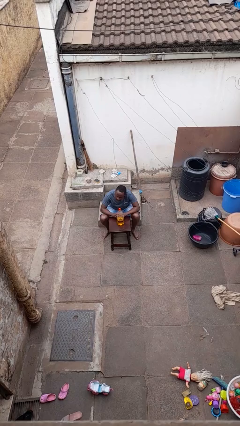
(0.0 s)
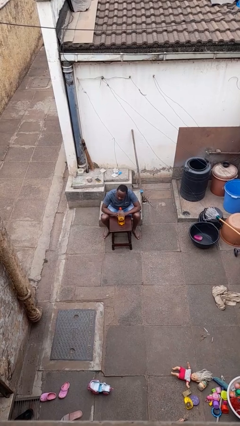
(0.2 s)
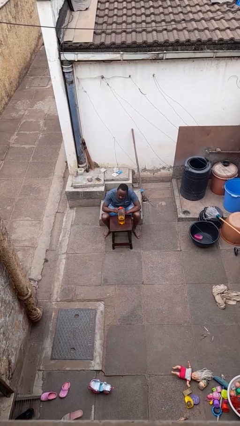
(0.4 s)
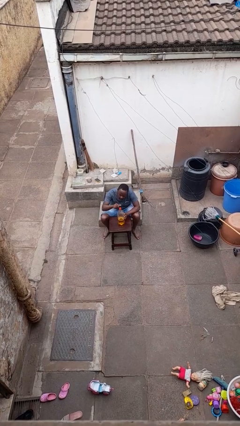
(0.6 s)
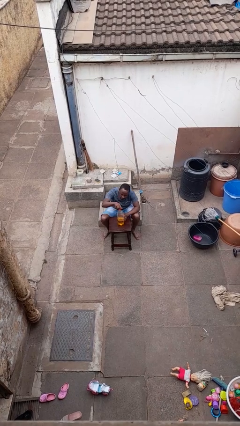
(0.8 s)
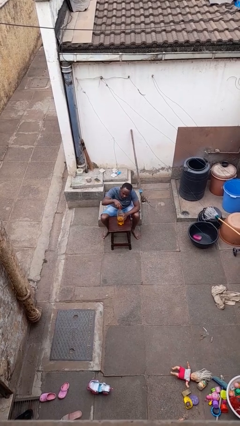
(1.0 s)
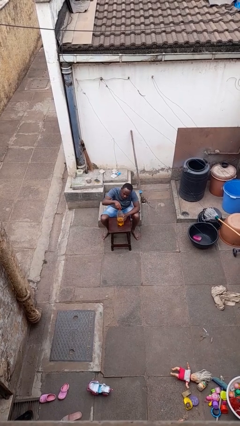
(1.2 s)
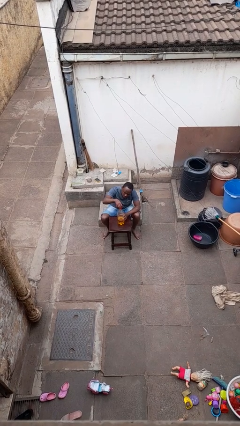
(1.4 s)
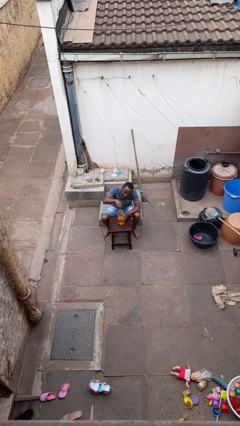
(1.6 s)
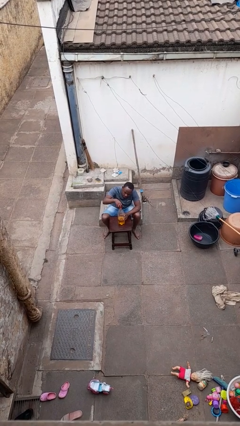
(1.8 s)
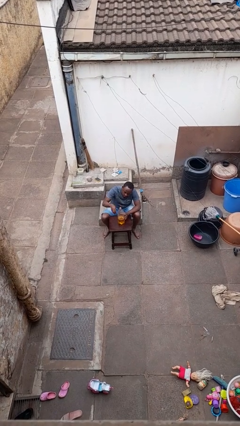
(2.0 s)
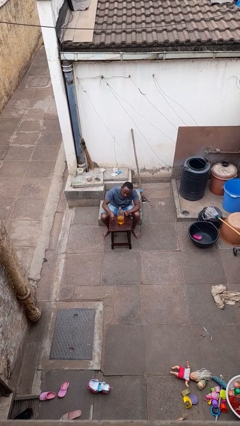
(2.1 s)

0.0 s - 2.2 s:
person unscrews lid from bottle

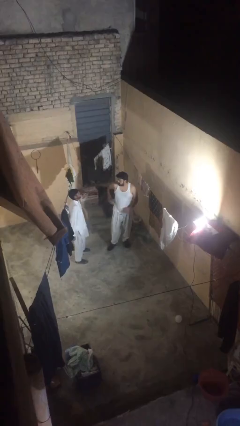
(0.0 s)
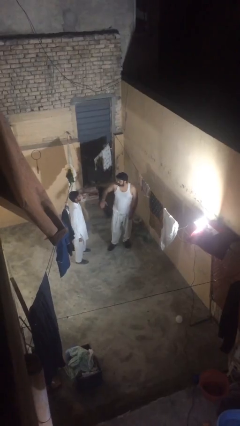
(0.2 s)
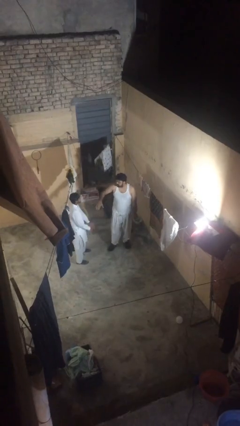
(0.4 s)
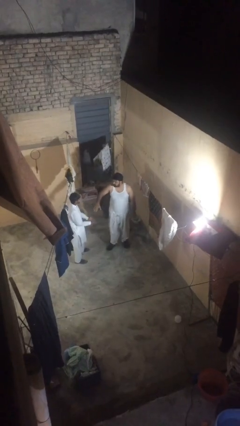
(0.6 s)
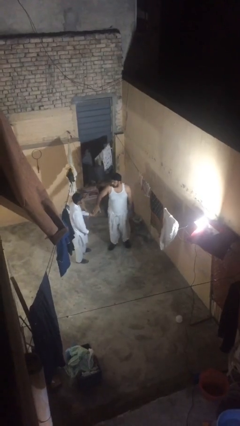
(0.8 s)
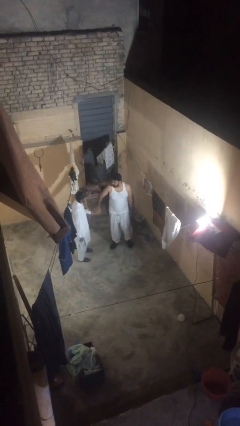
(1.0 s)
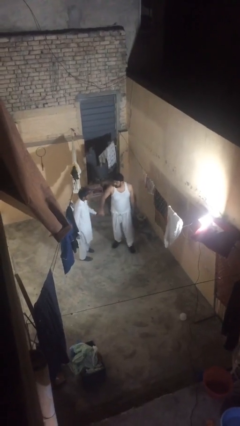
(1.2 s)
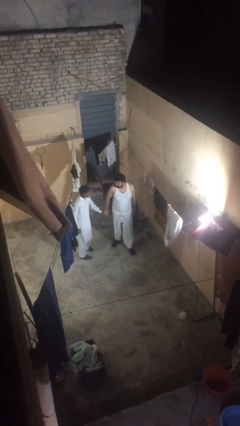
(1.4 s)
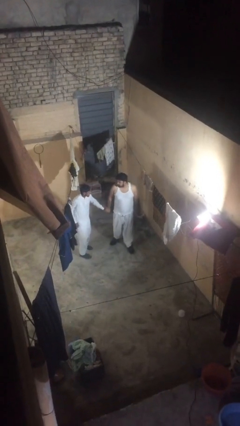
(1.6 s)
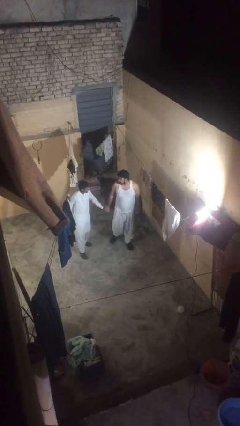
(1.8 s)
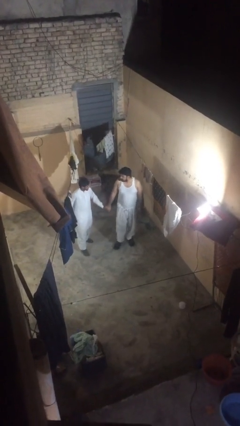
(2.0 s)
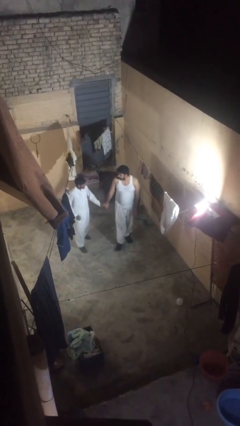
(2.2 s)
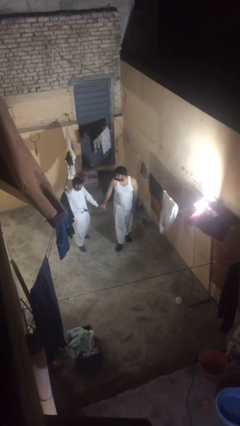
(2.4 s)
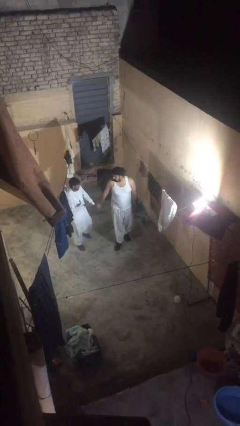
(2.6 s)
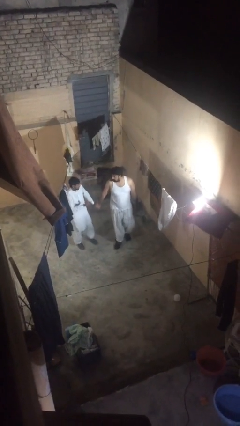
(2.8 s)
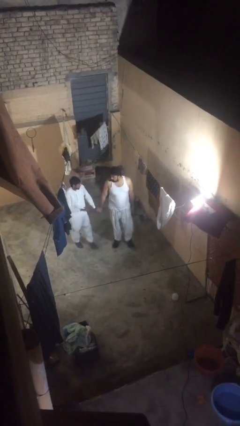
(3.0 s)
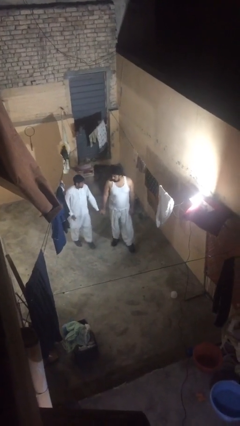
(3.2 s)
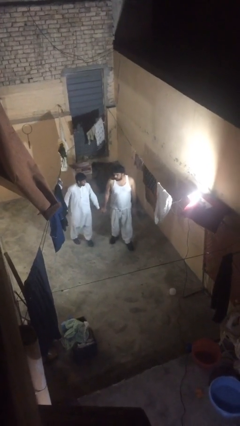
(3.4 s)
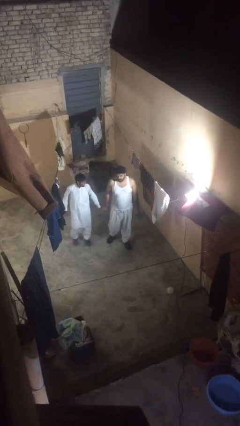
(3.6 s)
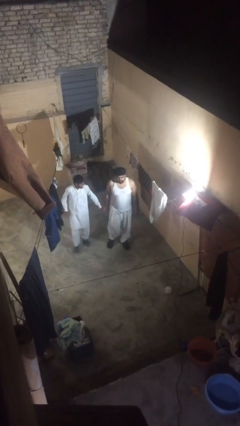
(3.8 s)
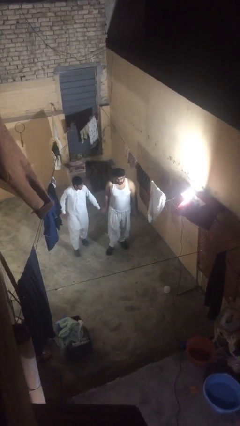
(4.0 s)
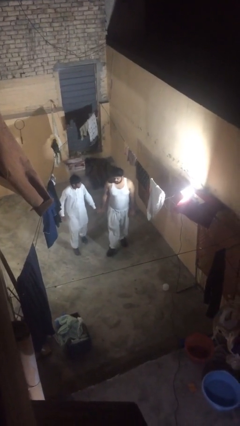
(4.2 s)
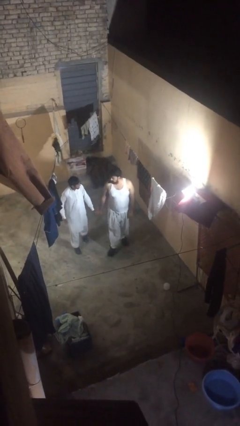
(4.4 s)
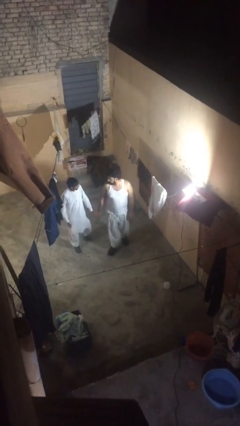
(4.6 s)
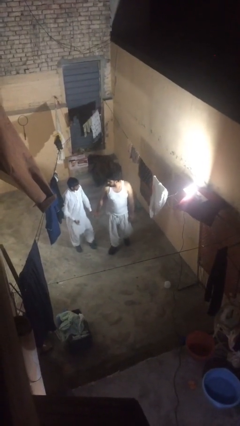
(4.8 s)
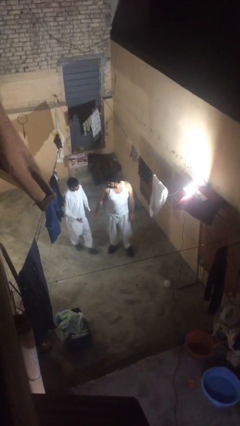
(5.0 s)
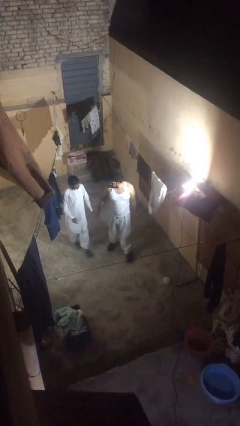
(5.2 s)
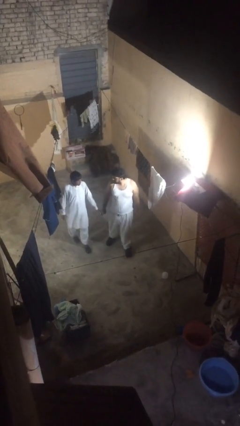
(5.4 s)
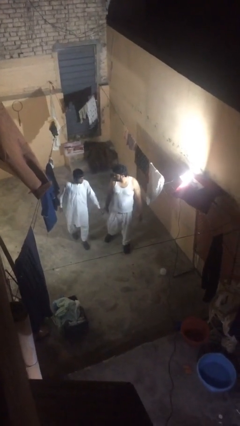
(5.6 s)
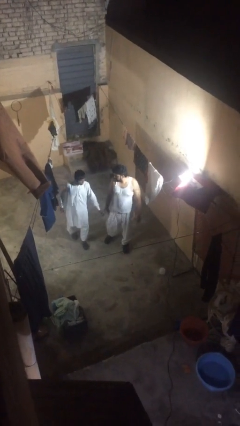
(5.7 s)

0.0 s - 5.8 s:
person holds hand

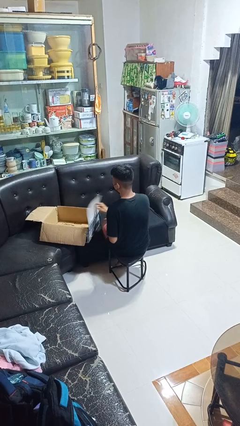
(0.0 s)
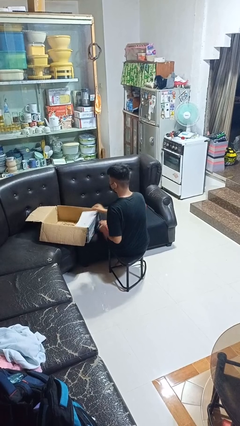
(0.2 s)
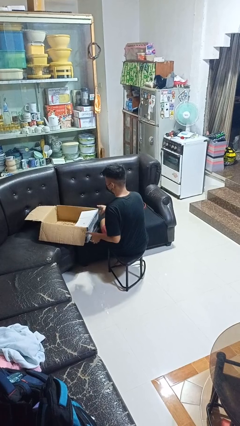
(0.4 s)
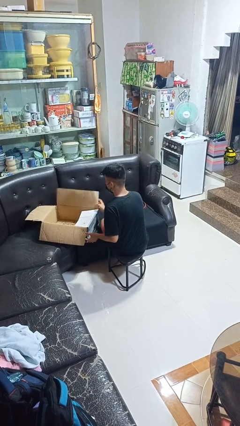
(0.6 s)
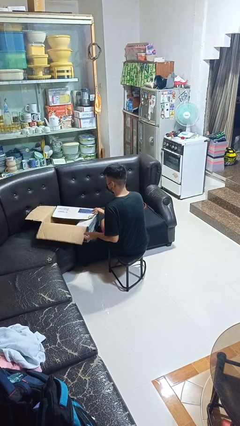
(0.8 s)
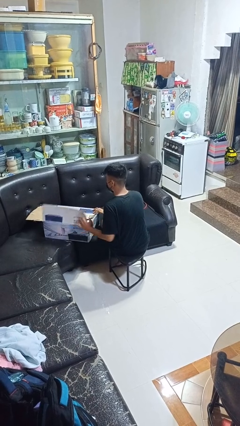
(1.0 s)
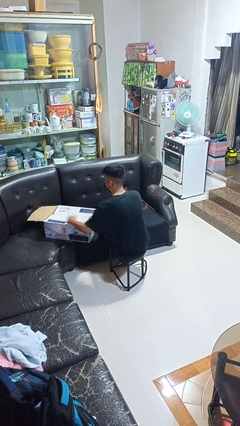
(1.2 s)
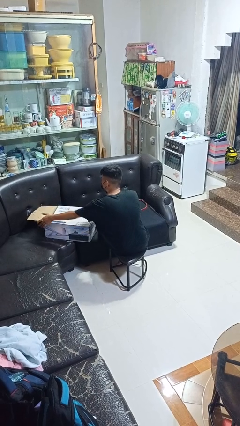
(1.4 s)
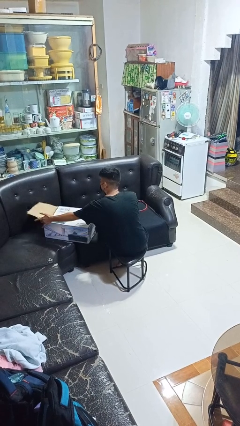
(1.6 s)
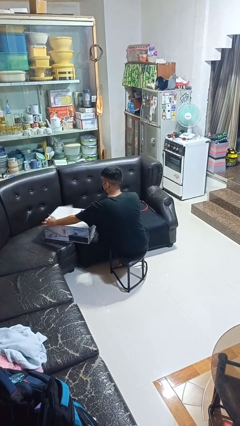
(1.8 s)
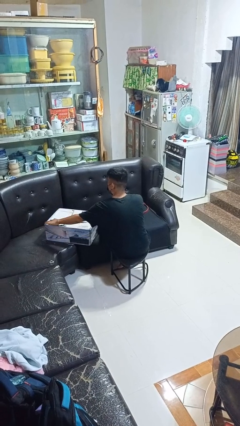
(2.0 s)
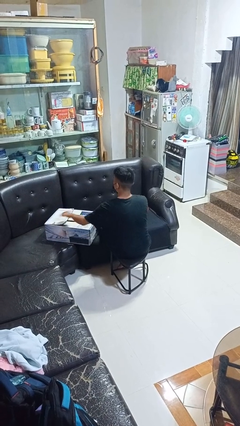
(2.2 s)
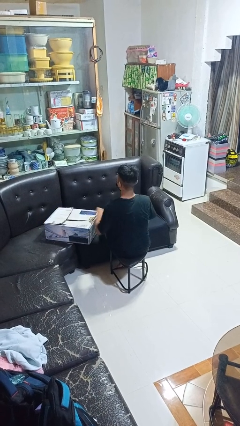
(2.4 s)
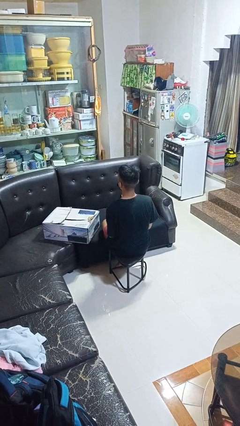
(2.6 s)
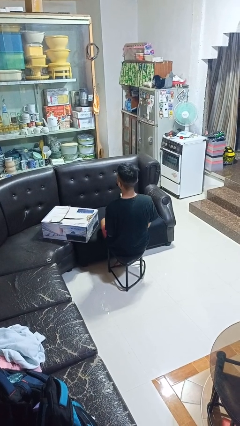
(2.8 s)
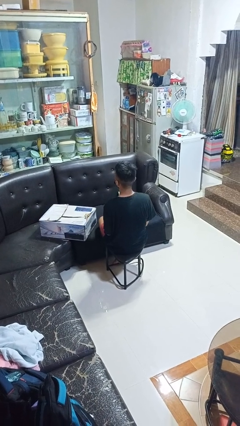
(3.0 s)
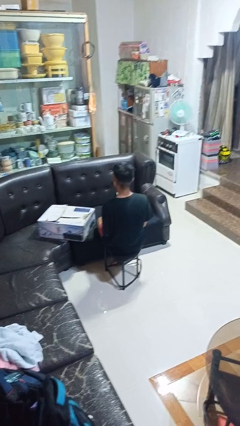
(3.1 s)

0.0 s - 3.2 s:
person closes box

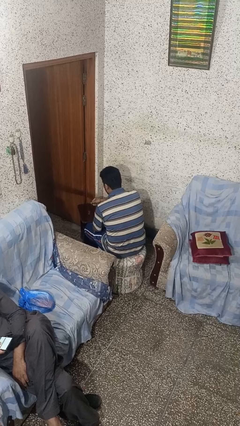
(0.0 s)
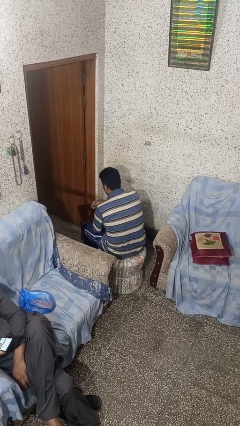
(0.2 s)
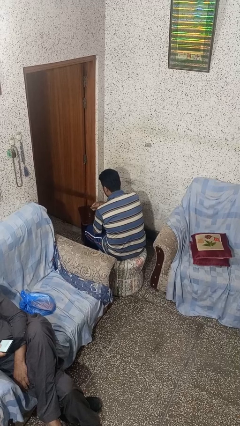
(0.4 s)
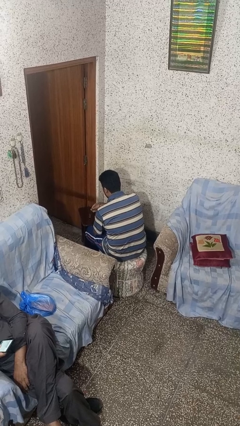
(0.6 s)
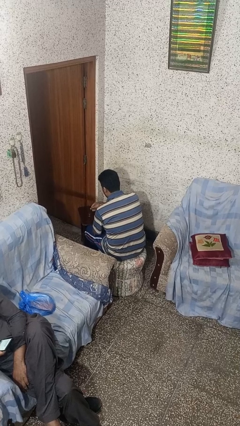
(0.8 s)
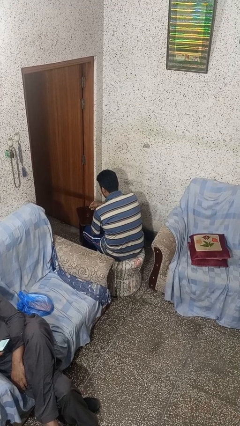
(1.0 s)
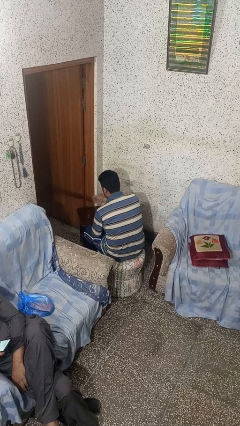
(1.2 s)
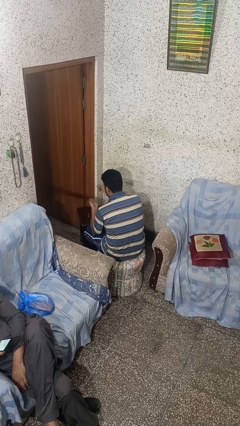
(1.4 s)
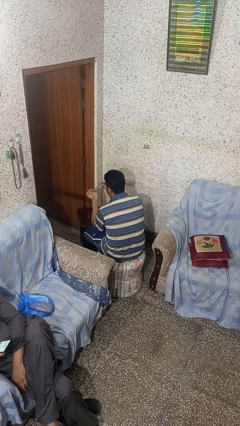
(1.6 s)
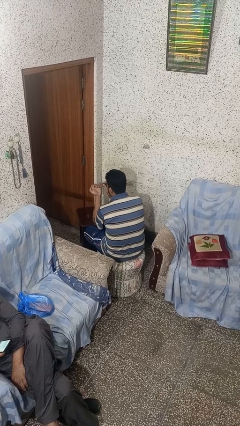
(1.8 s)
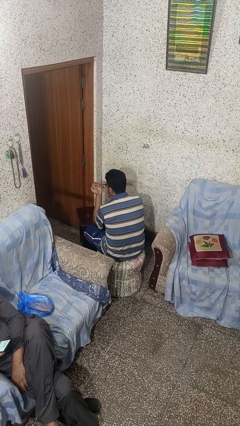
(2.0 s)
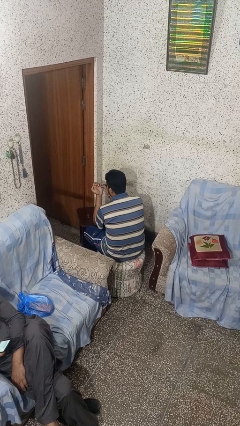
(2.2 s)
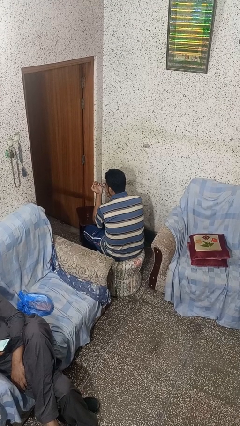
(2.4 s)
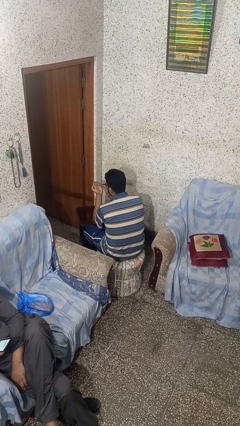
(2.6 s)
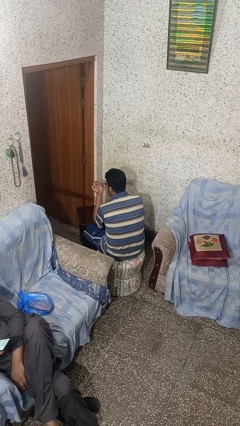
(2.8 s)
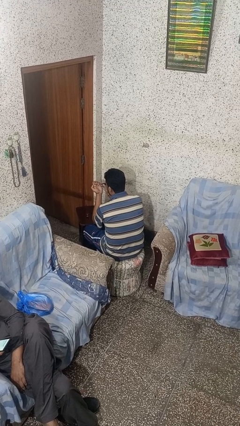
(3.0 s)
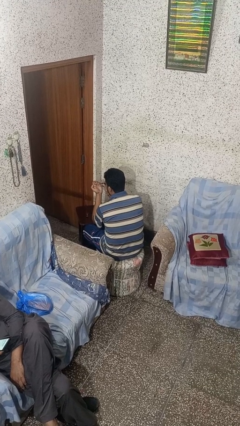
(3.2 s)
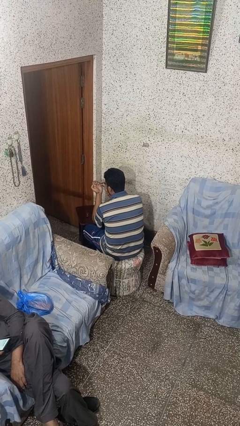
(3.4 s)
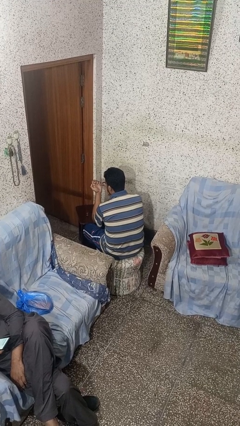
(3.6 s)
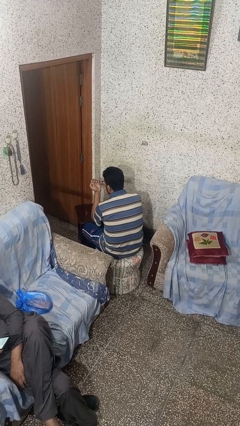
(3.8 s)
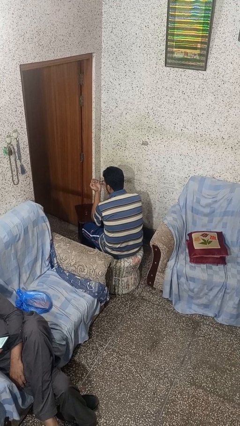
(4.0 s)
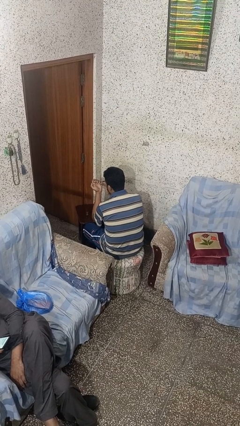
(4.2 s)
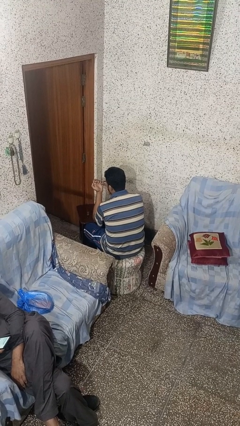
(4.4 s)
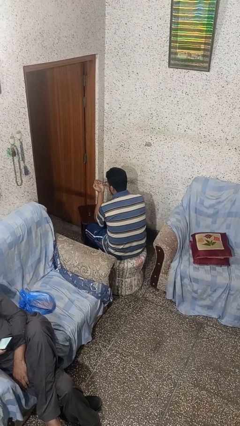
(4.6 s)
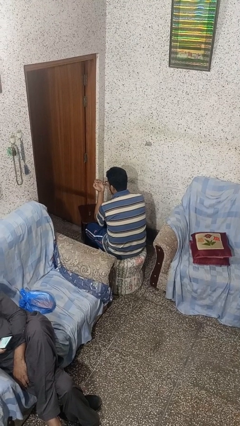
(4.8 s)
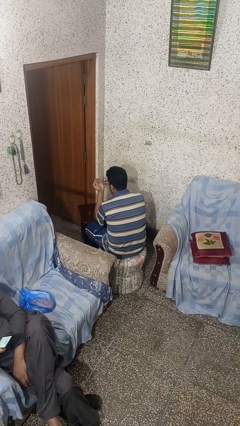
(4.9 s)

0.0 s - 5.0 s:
person paints fingernails

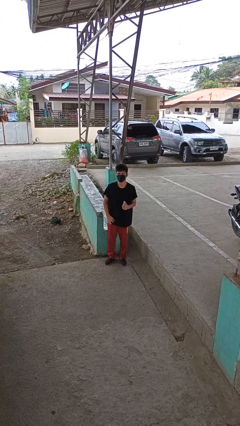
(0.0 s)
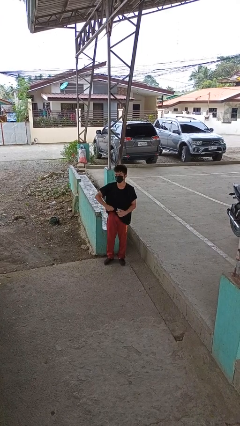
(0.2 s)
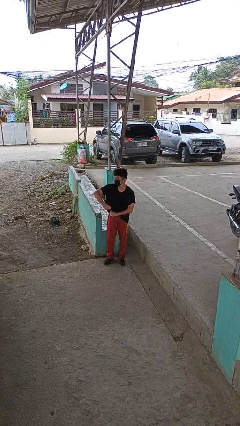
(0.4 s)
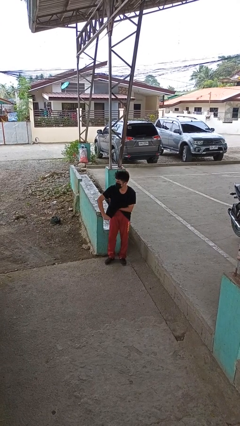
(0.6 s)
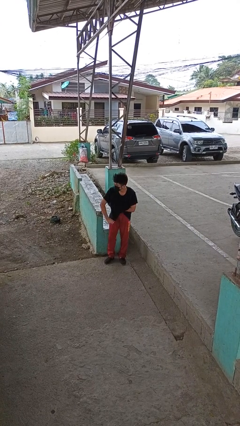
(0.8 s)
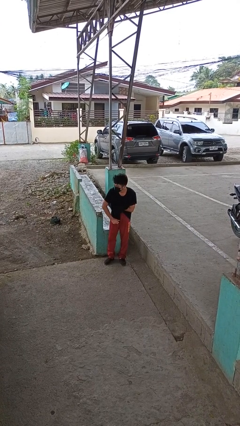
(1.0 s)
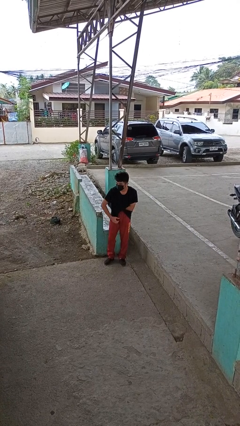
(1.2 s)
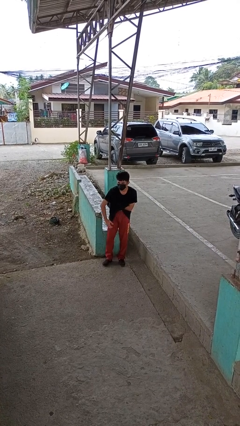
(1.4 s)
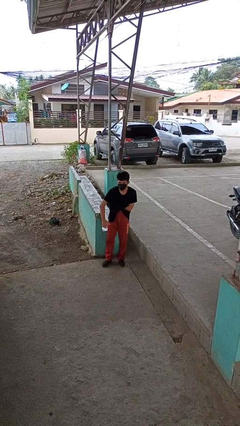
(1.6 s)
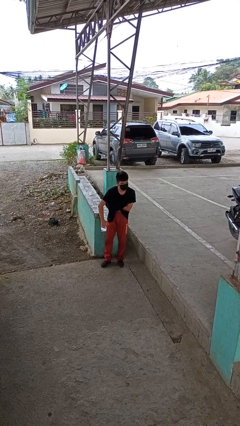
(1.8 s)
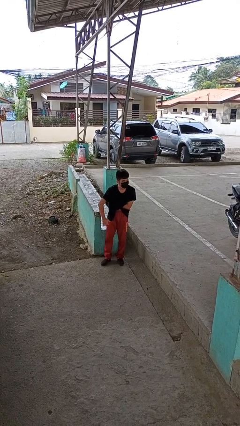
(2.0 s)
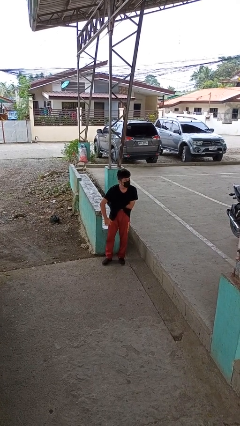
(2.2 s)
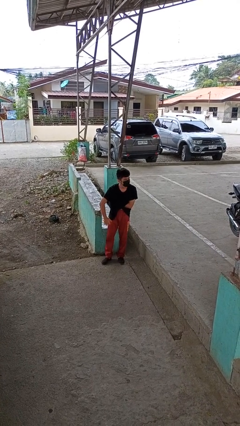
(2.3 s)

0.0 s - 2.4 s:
person applies deodorant
